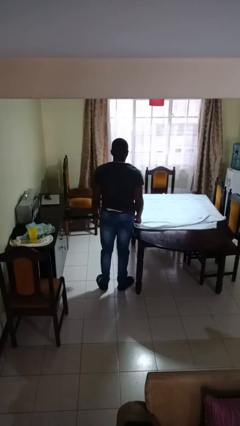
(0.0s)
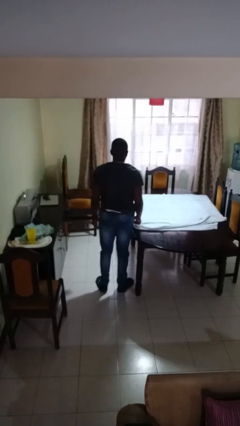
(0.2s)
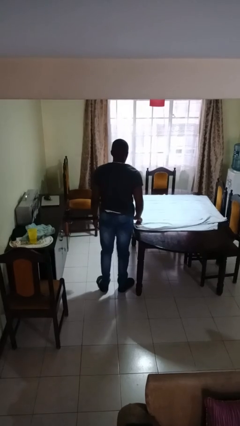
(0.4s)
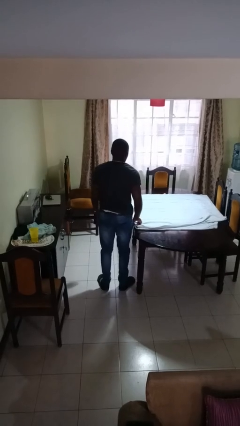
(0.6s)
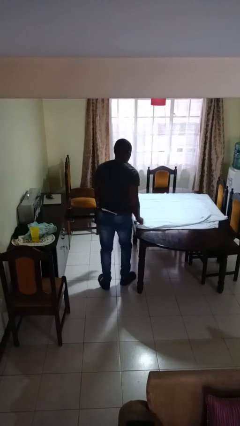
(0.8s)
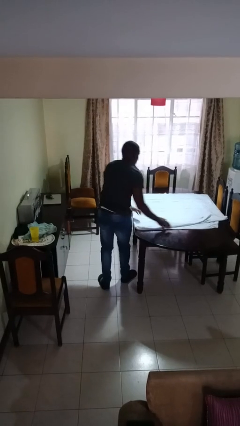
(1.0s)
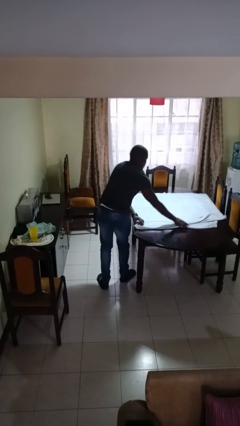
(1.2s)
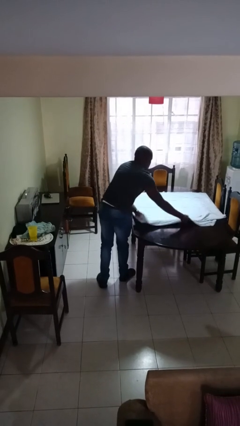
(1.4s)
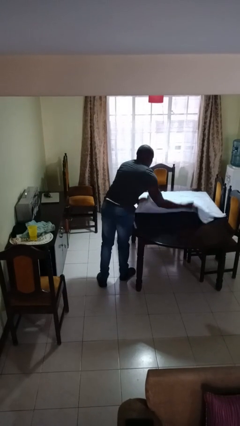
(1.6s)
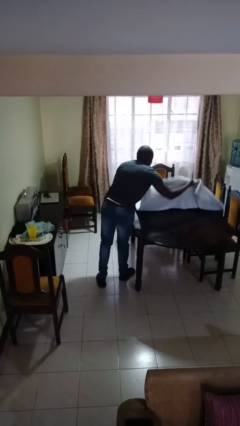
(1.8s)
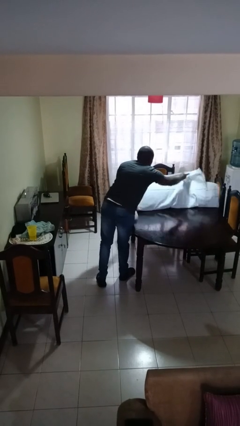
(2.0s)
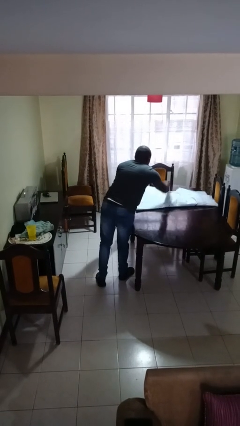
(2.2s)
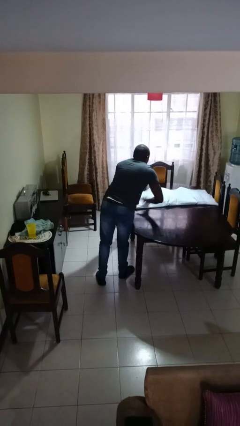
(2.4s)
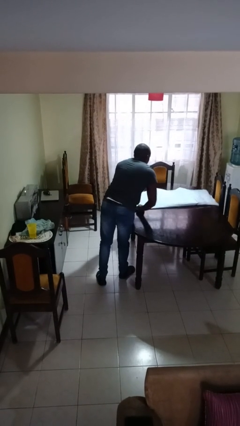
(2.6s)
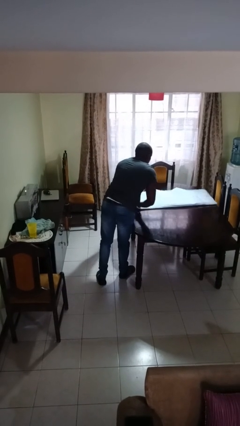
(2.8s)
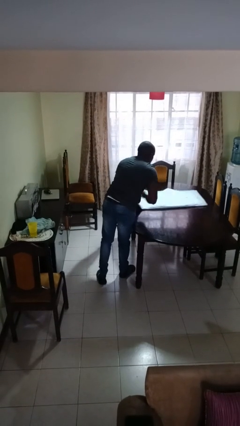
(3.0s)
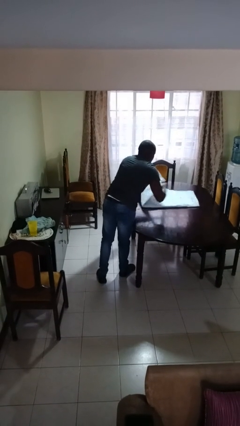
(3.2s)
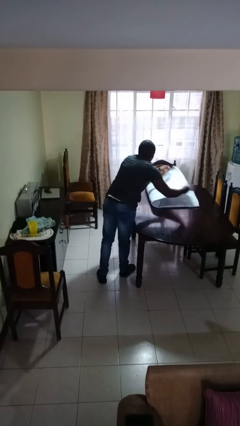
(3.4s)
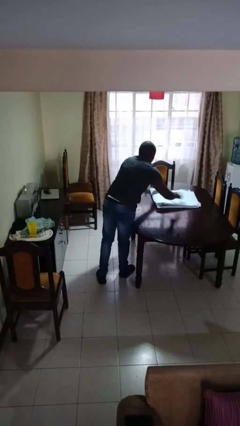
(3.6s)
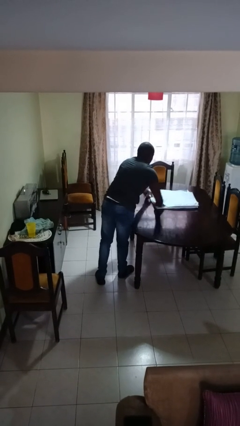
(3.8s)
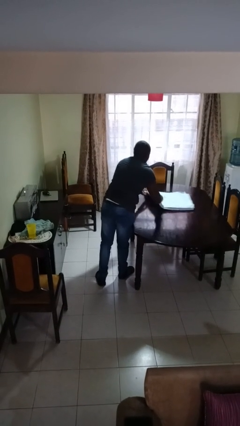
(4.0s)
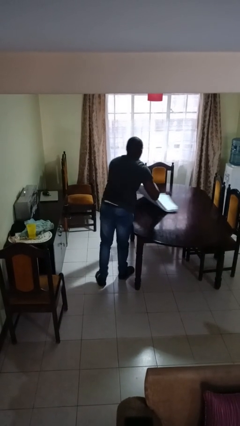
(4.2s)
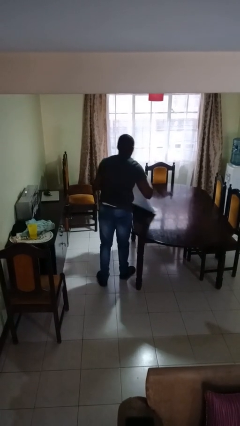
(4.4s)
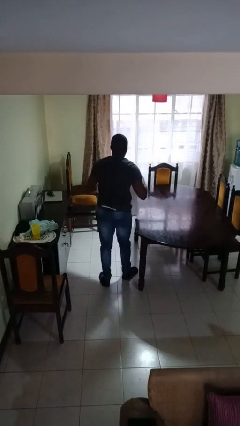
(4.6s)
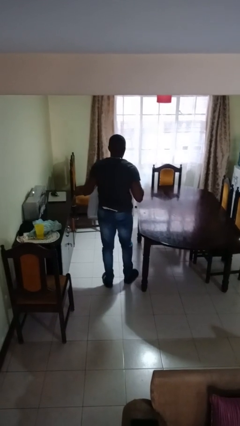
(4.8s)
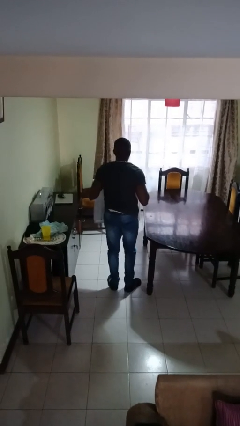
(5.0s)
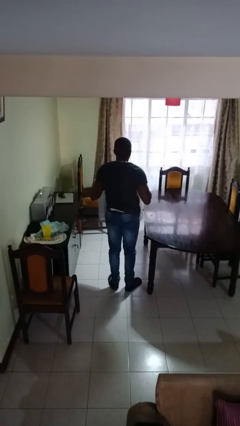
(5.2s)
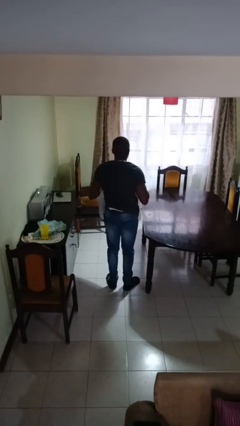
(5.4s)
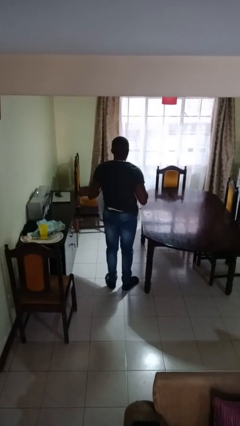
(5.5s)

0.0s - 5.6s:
person folds tablecloth

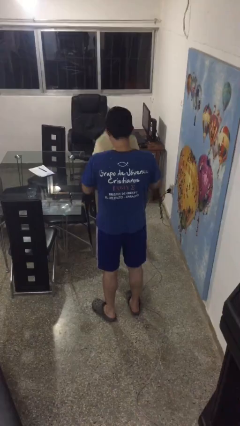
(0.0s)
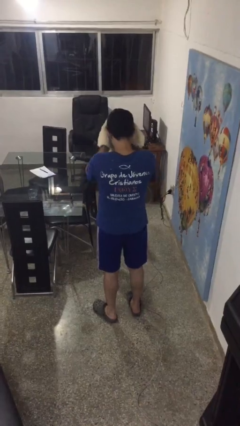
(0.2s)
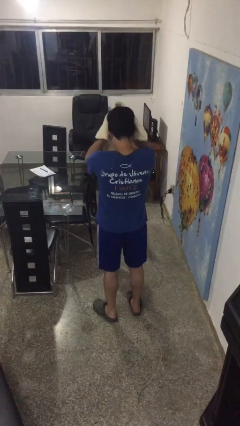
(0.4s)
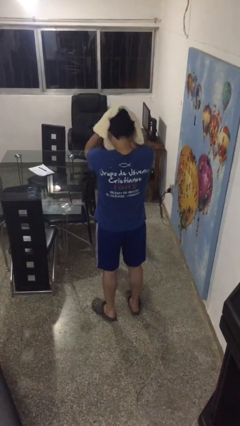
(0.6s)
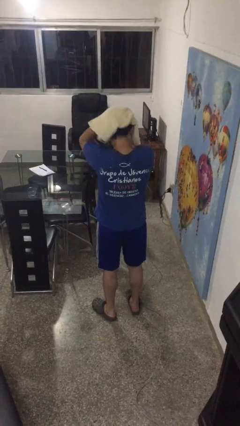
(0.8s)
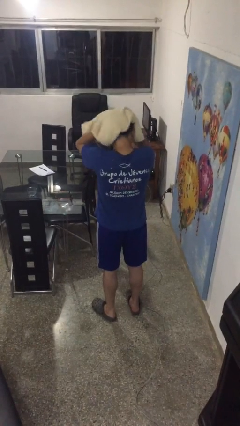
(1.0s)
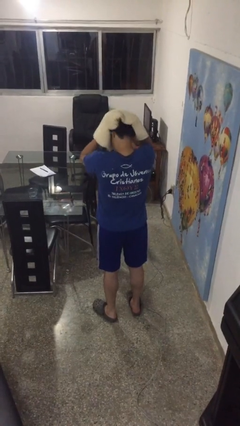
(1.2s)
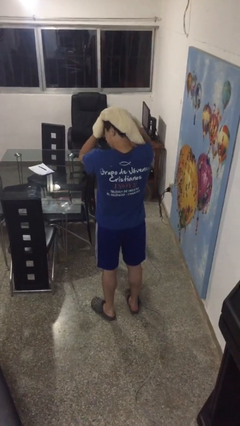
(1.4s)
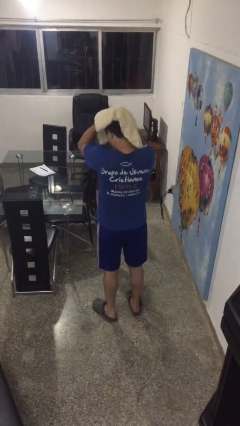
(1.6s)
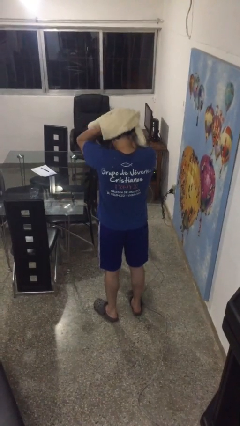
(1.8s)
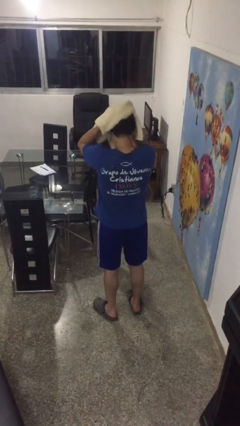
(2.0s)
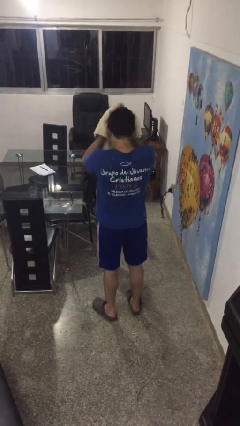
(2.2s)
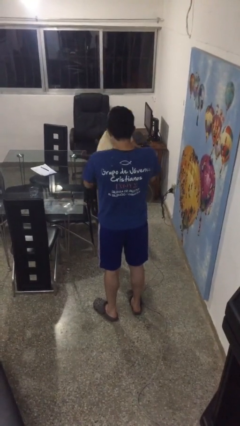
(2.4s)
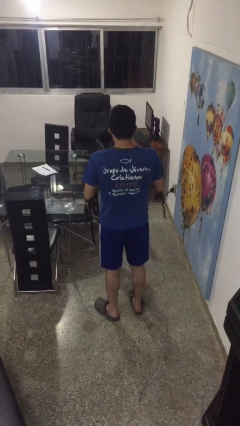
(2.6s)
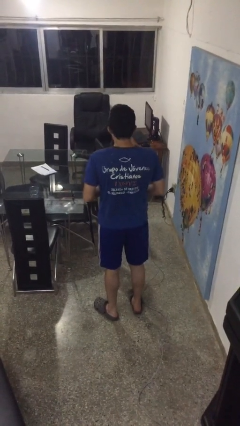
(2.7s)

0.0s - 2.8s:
person dries hair with towel

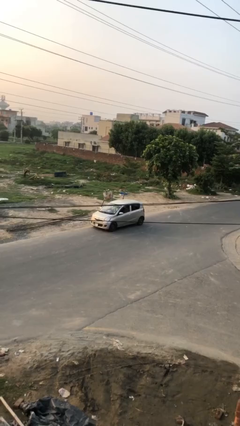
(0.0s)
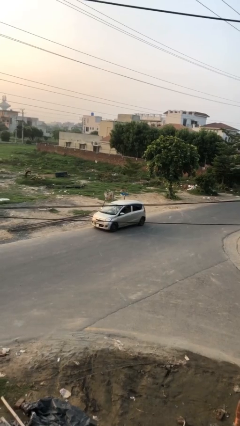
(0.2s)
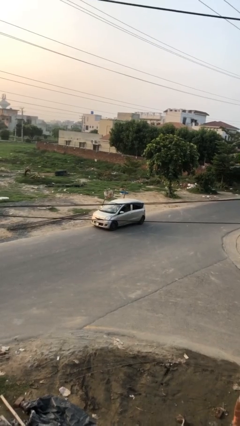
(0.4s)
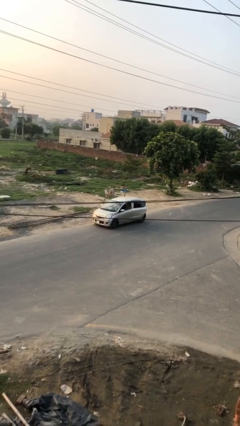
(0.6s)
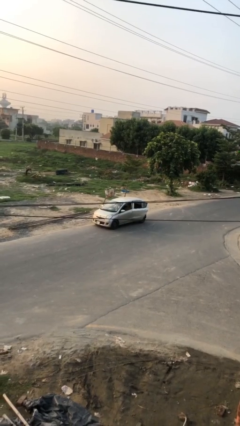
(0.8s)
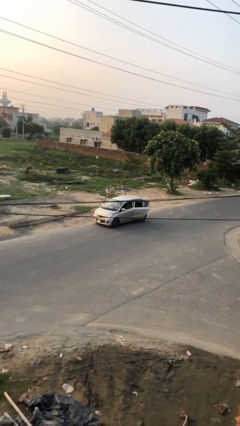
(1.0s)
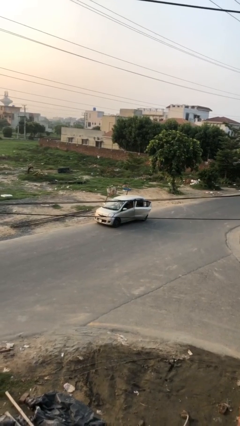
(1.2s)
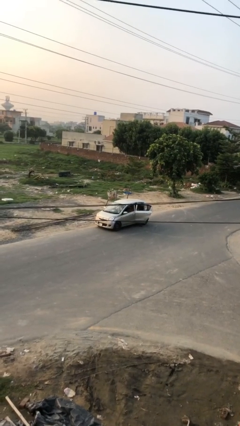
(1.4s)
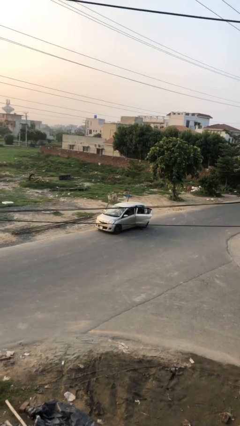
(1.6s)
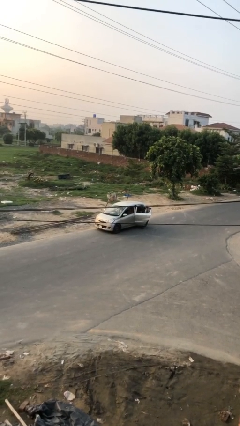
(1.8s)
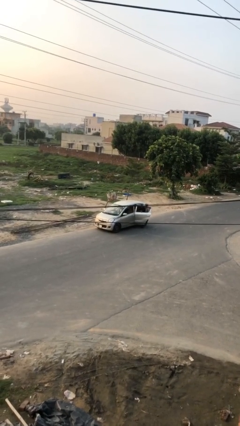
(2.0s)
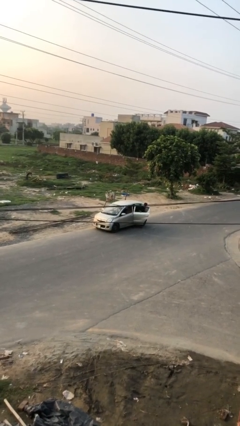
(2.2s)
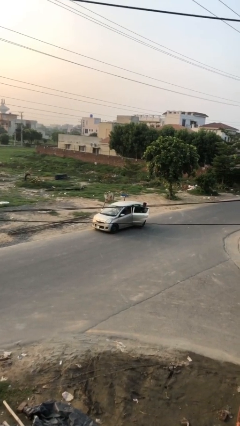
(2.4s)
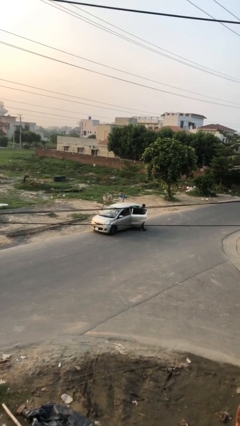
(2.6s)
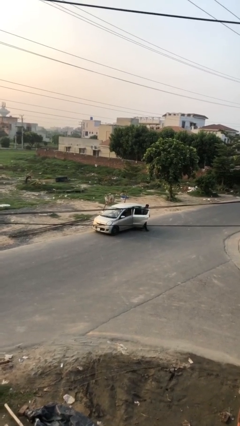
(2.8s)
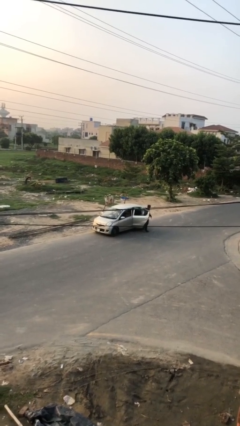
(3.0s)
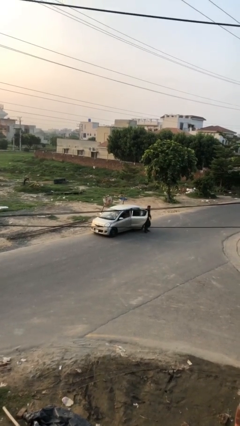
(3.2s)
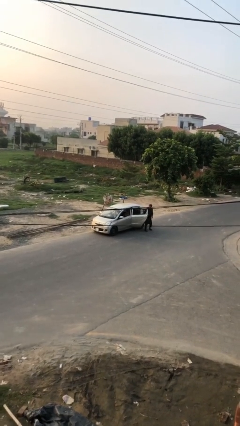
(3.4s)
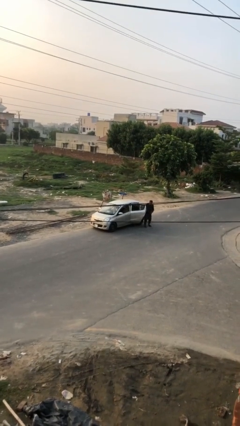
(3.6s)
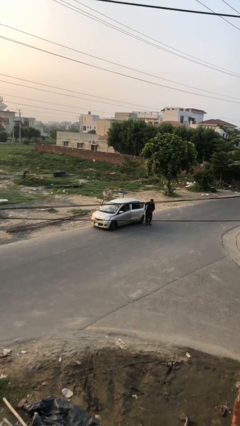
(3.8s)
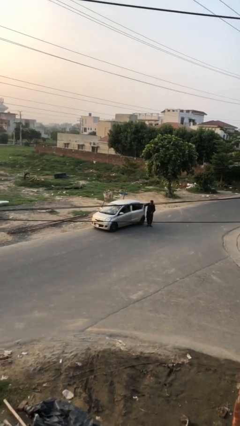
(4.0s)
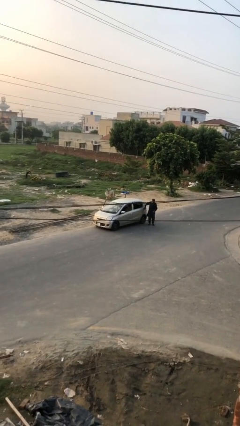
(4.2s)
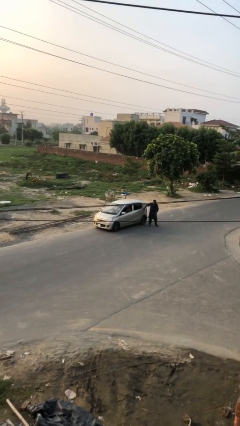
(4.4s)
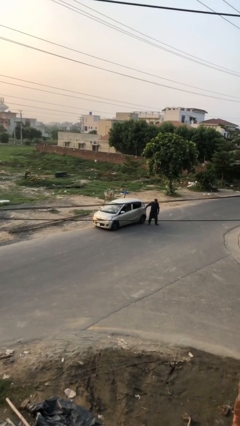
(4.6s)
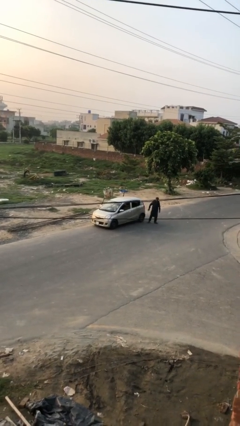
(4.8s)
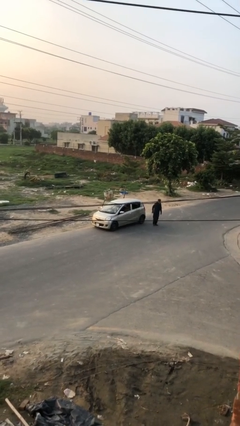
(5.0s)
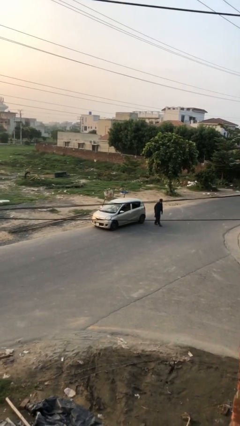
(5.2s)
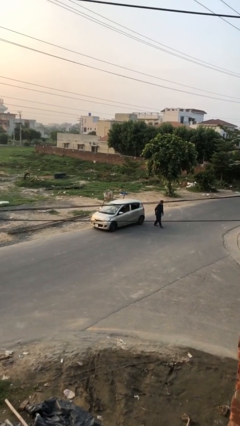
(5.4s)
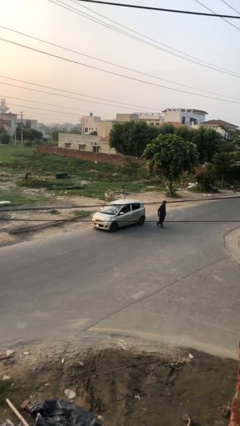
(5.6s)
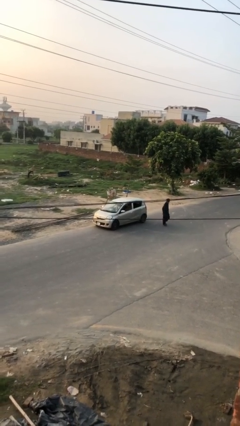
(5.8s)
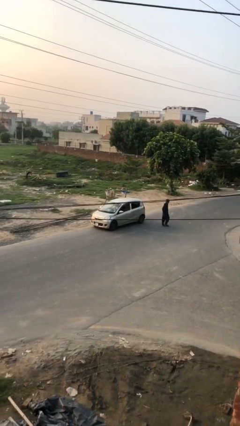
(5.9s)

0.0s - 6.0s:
car drops off person

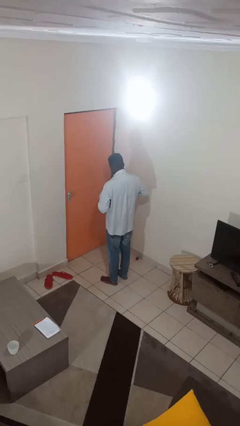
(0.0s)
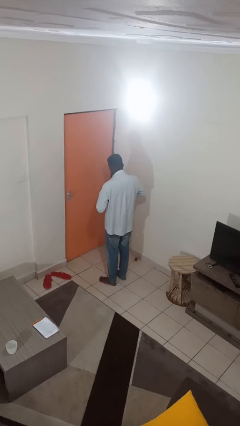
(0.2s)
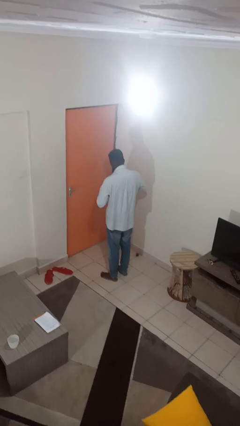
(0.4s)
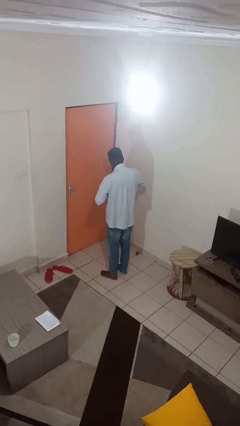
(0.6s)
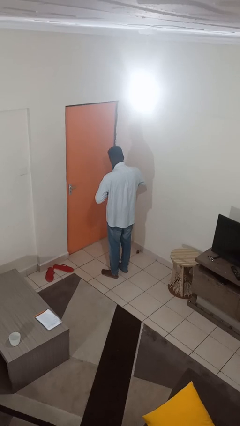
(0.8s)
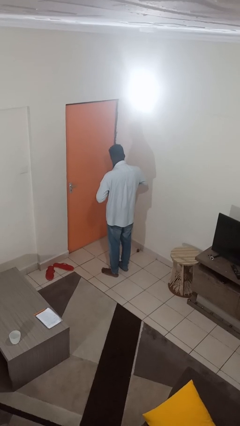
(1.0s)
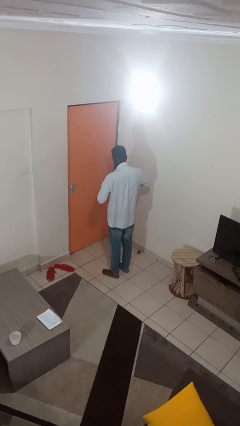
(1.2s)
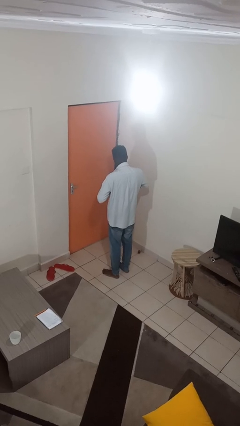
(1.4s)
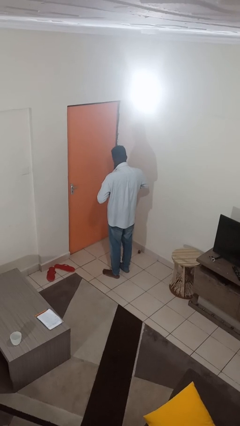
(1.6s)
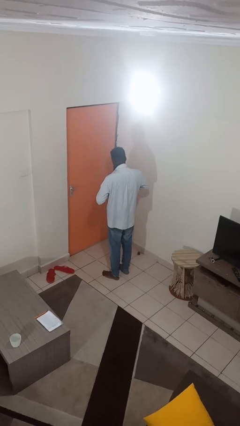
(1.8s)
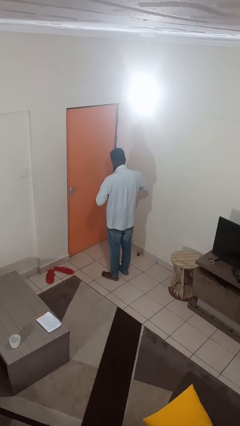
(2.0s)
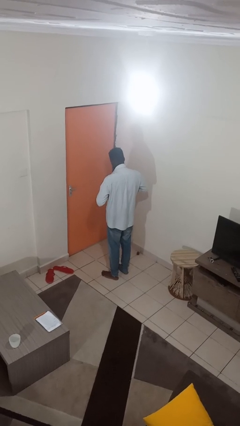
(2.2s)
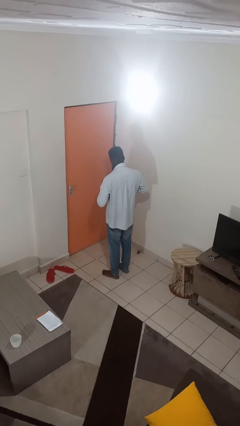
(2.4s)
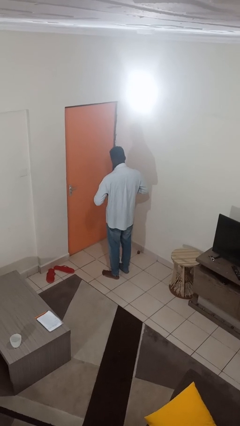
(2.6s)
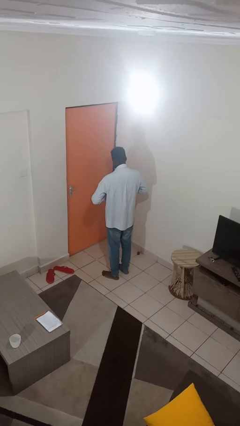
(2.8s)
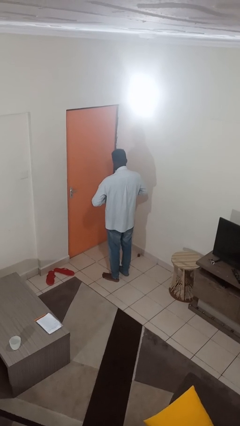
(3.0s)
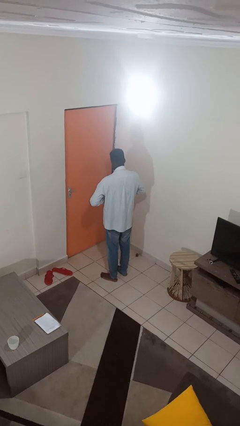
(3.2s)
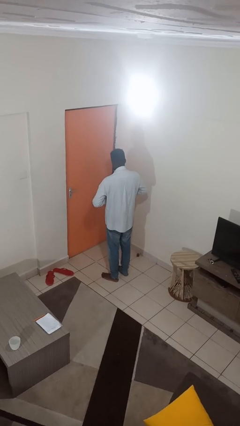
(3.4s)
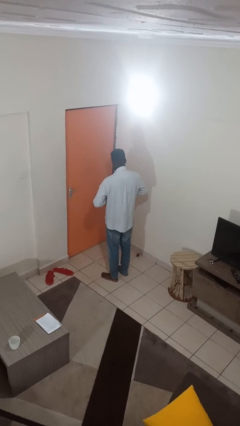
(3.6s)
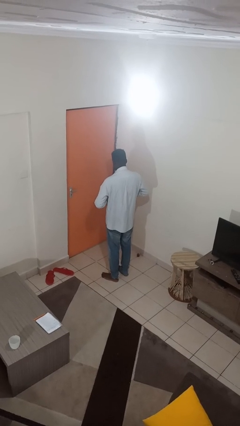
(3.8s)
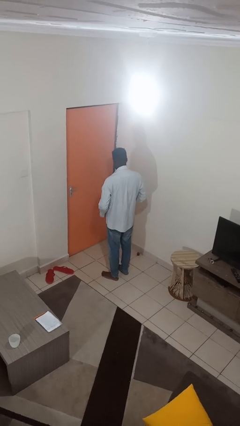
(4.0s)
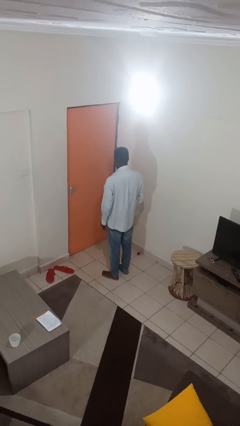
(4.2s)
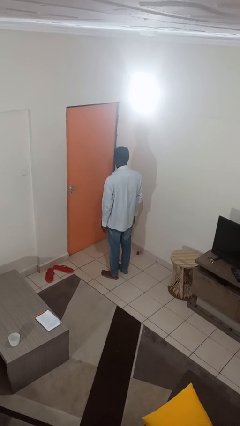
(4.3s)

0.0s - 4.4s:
person buttons shirt
